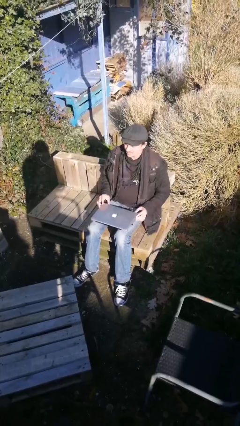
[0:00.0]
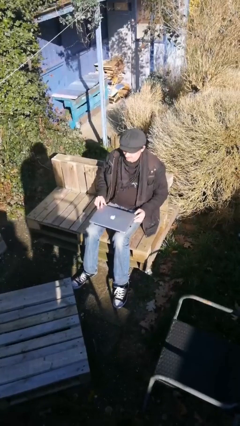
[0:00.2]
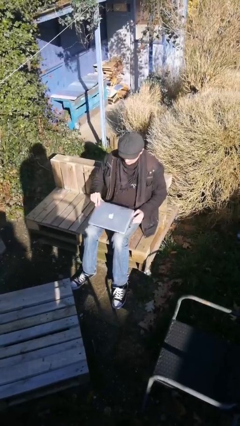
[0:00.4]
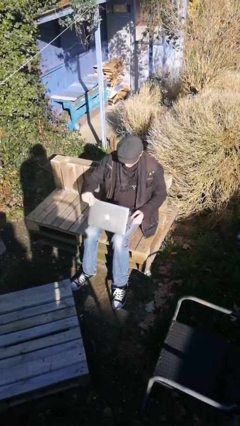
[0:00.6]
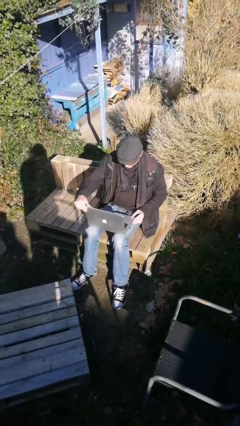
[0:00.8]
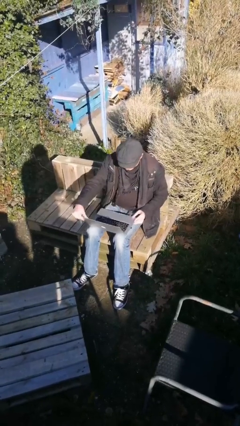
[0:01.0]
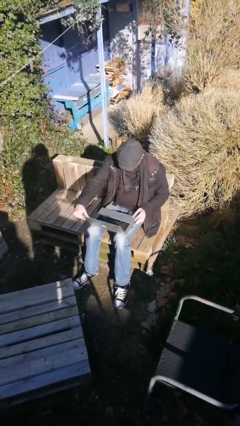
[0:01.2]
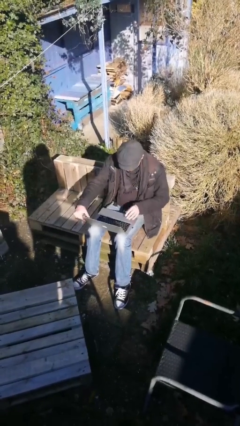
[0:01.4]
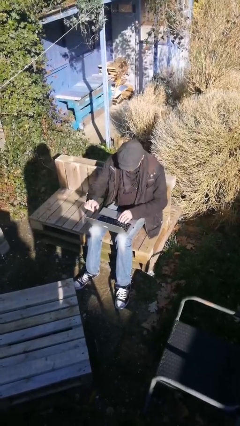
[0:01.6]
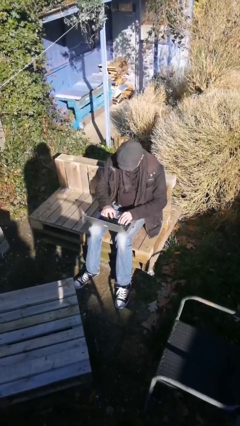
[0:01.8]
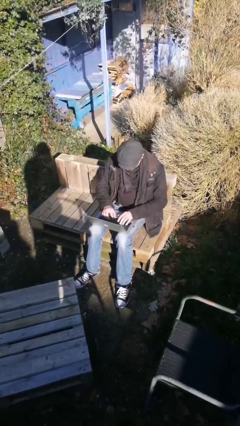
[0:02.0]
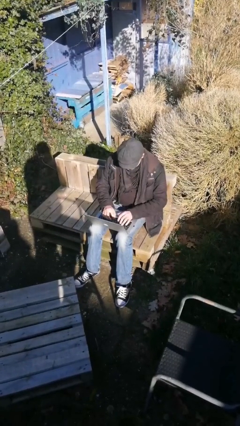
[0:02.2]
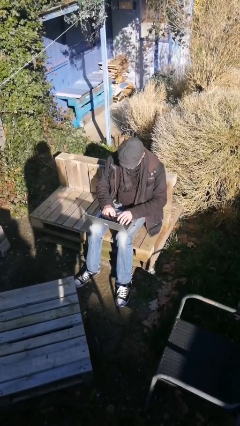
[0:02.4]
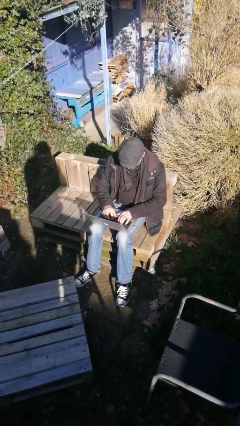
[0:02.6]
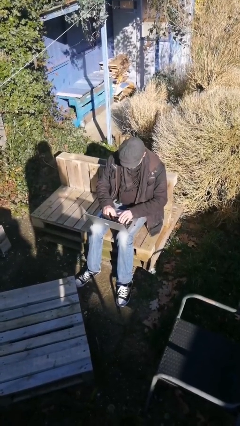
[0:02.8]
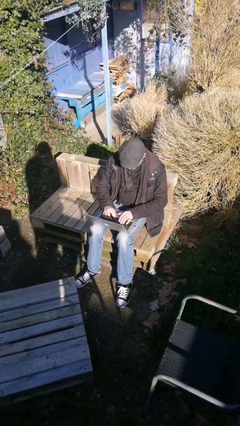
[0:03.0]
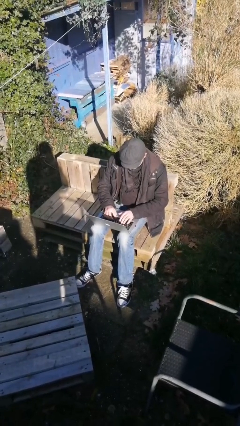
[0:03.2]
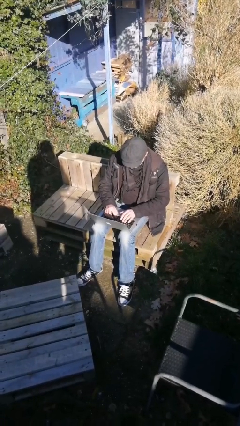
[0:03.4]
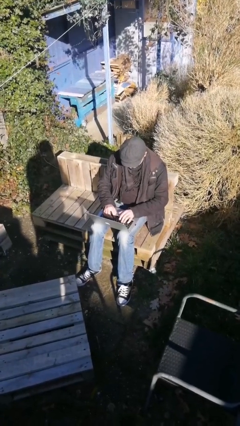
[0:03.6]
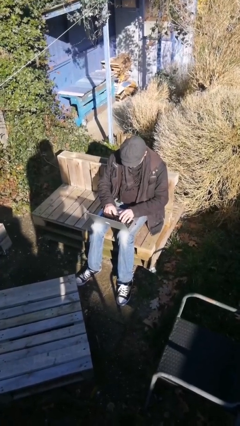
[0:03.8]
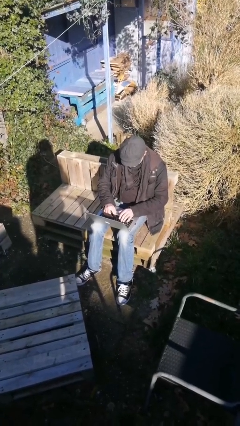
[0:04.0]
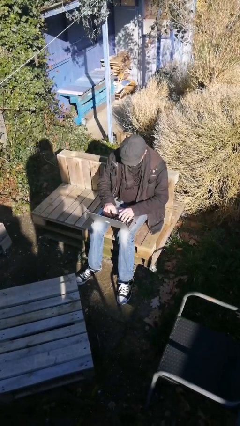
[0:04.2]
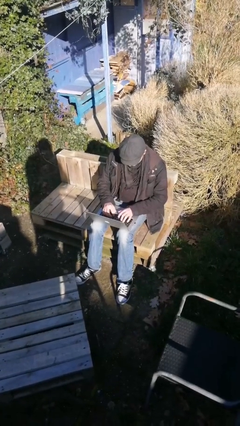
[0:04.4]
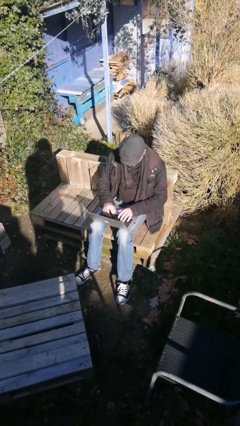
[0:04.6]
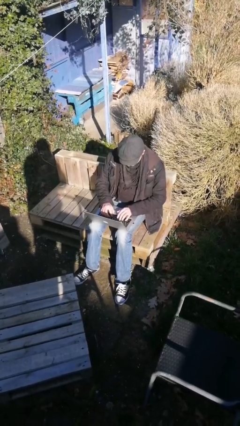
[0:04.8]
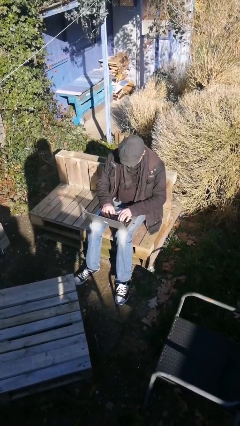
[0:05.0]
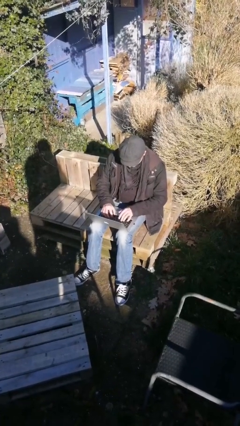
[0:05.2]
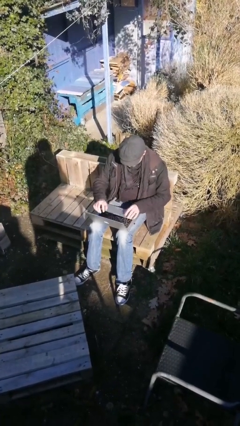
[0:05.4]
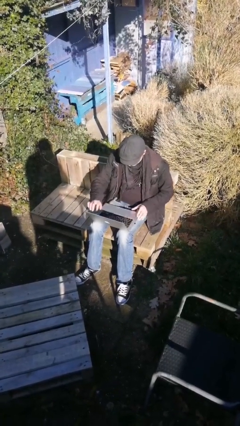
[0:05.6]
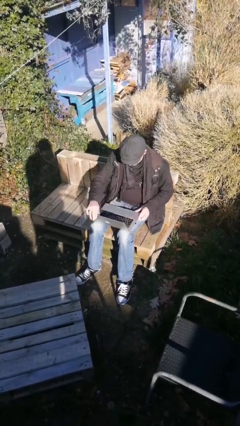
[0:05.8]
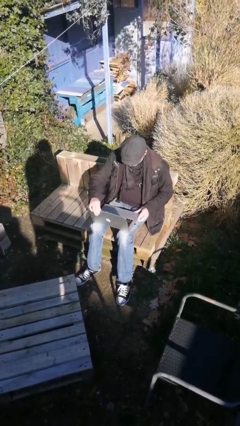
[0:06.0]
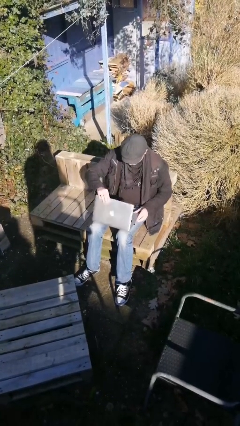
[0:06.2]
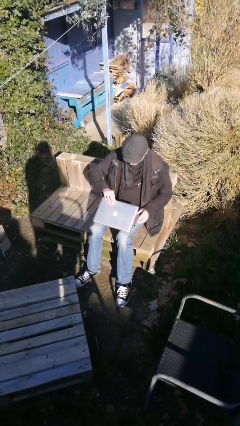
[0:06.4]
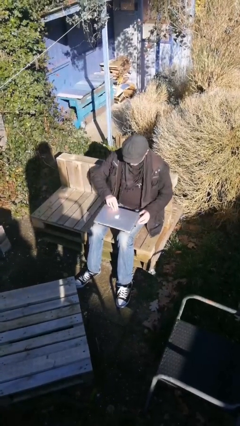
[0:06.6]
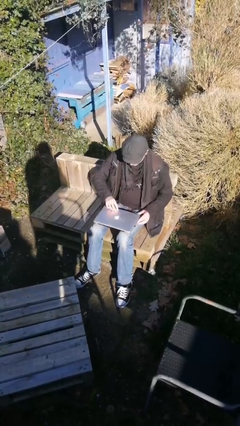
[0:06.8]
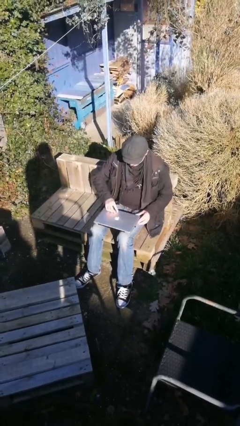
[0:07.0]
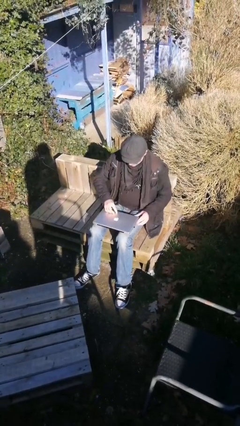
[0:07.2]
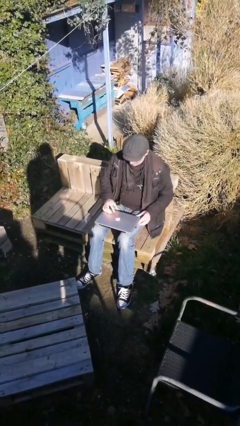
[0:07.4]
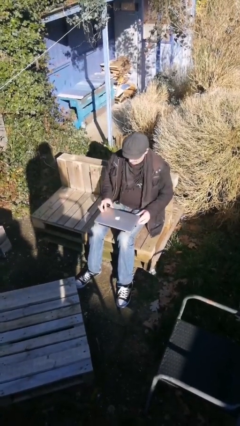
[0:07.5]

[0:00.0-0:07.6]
person interacts with laptop

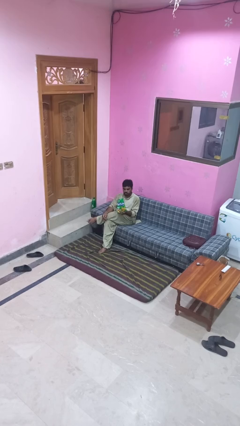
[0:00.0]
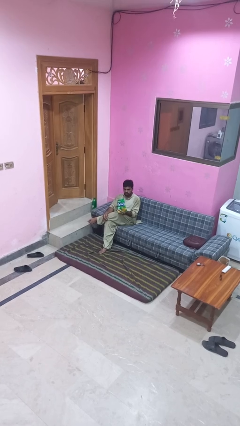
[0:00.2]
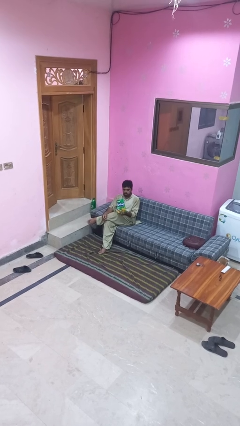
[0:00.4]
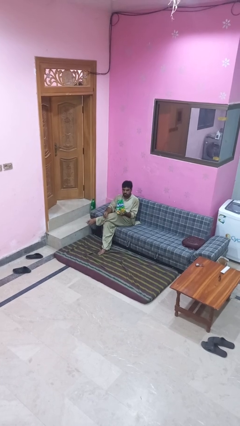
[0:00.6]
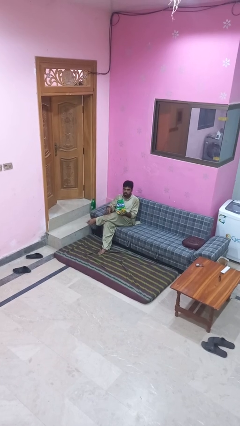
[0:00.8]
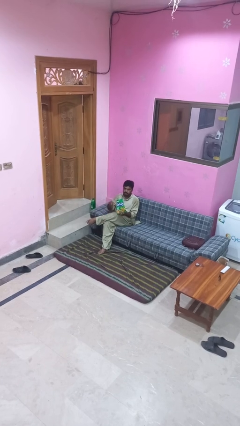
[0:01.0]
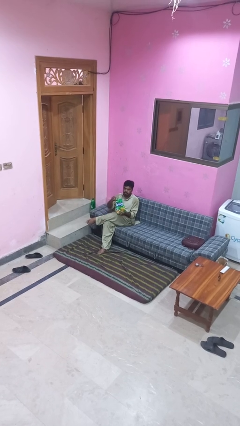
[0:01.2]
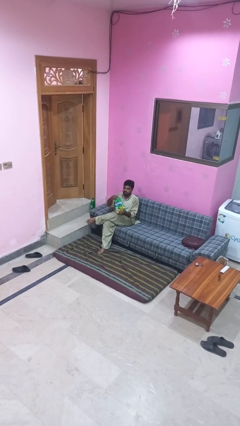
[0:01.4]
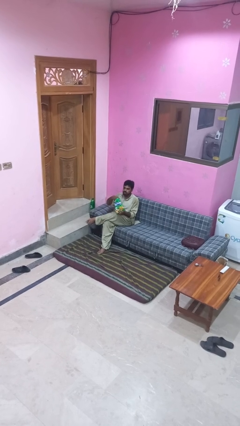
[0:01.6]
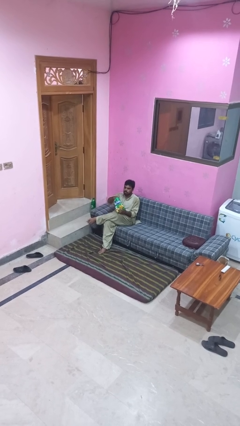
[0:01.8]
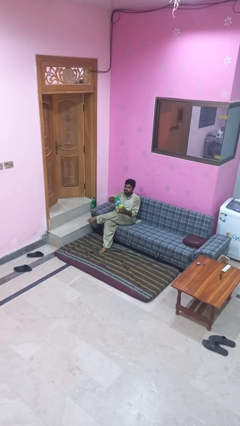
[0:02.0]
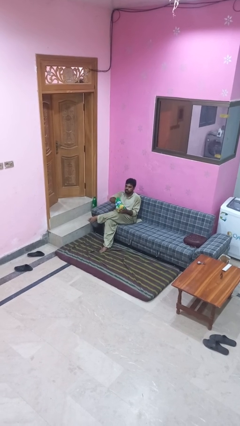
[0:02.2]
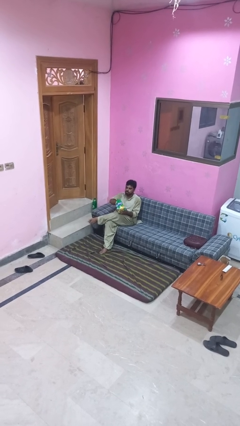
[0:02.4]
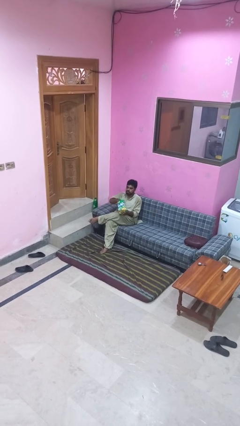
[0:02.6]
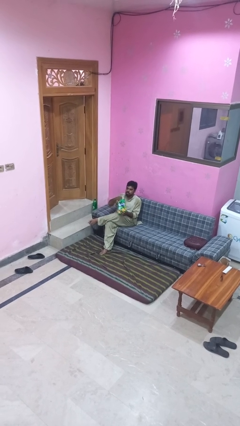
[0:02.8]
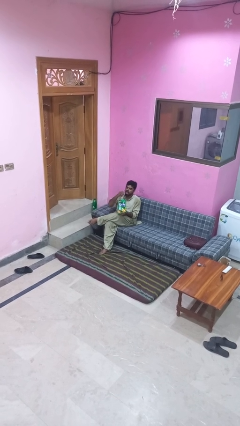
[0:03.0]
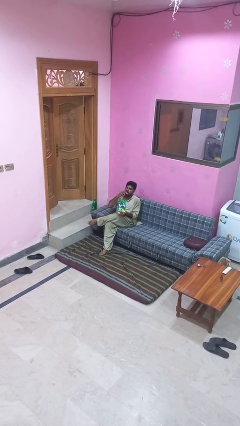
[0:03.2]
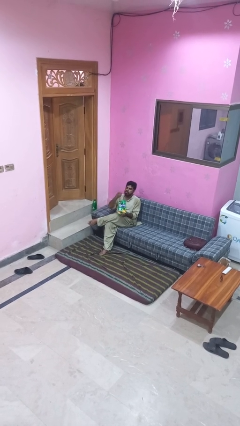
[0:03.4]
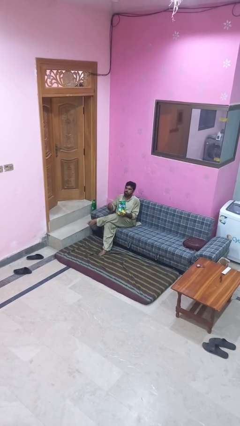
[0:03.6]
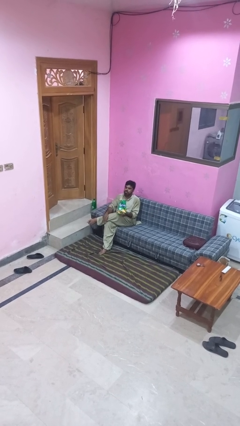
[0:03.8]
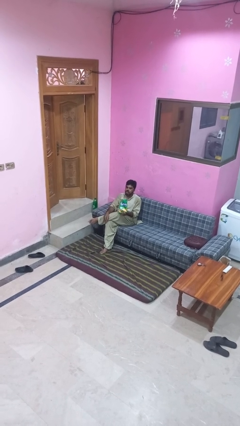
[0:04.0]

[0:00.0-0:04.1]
person eats snack from bag

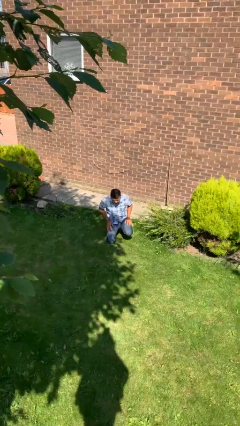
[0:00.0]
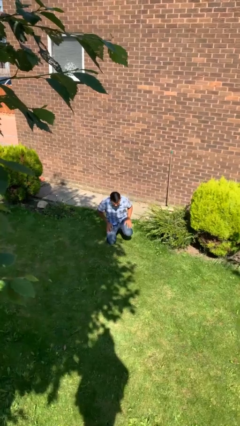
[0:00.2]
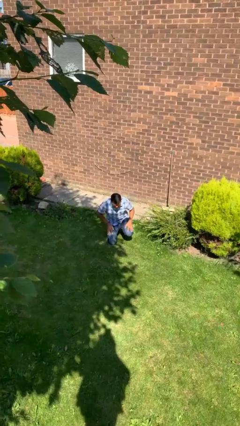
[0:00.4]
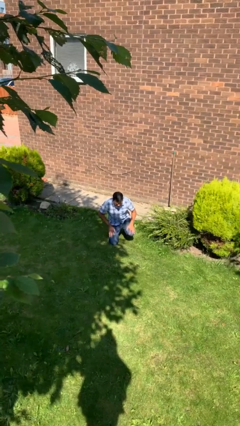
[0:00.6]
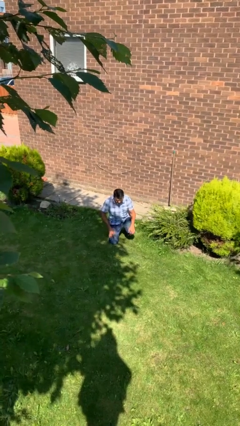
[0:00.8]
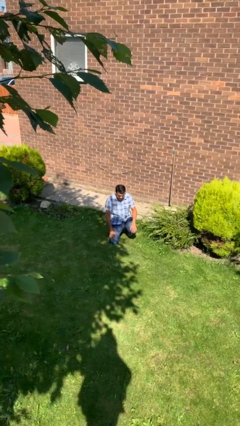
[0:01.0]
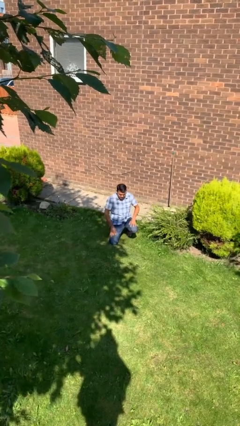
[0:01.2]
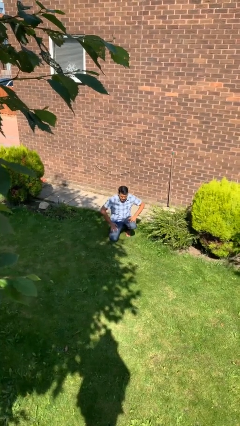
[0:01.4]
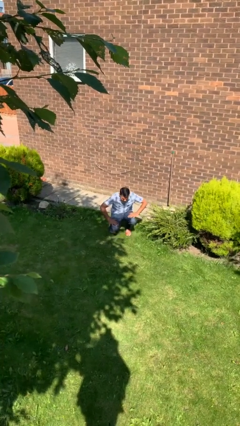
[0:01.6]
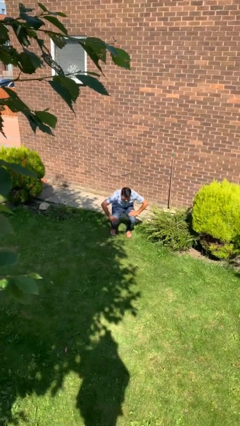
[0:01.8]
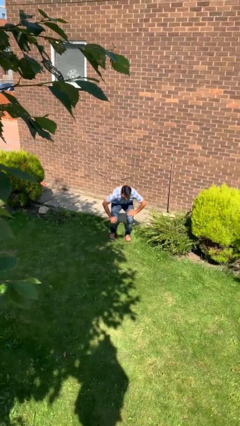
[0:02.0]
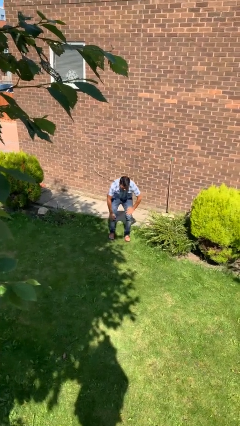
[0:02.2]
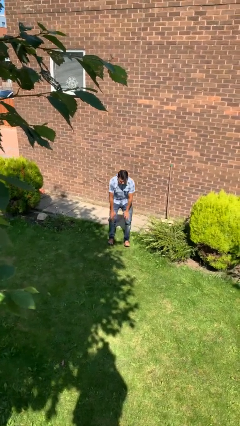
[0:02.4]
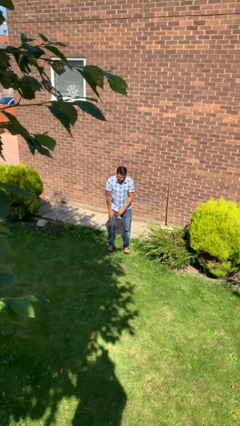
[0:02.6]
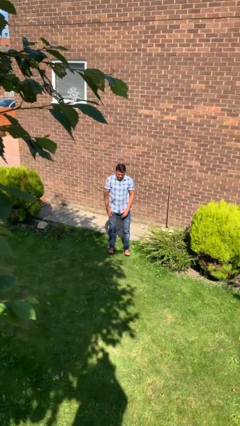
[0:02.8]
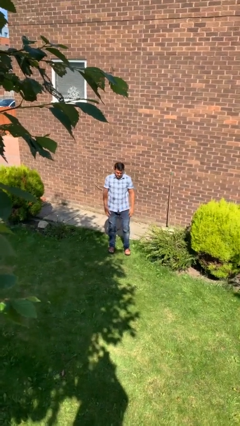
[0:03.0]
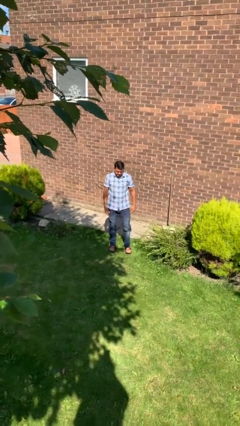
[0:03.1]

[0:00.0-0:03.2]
person stands up from floor

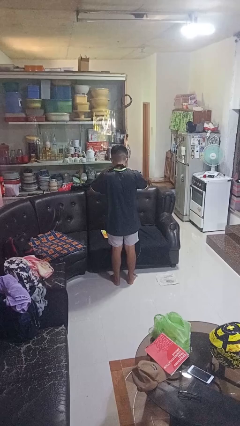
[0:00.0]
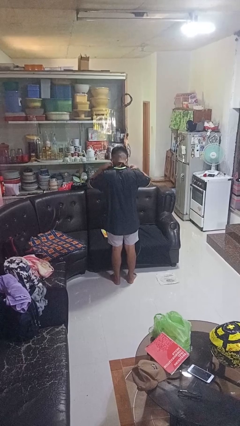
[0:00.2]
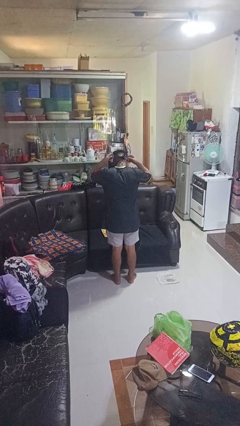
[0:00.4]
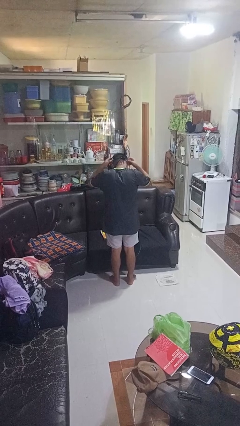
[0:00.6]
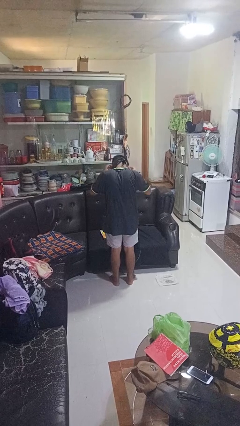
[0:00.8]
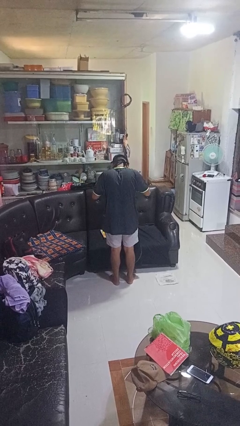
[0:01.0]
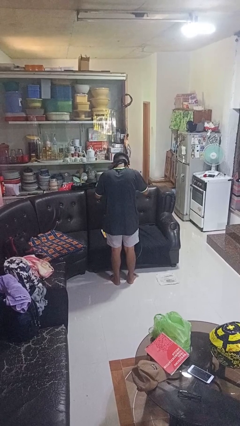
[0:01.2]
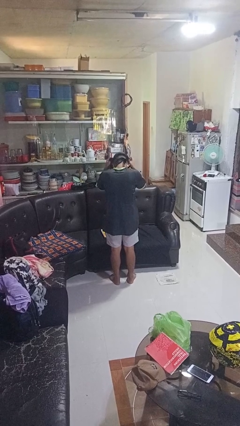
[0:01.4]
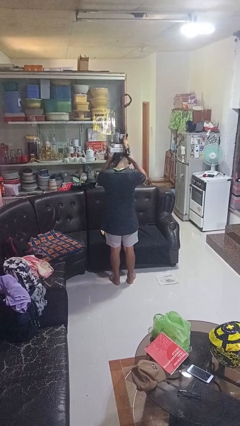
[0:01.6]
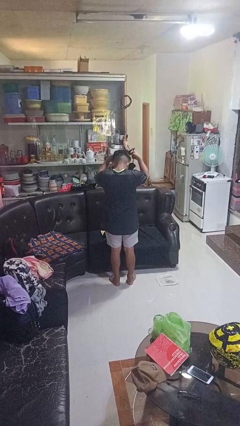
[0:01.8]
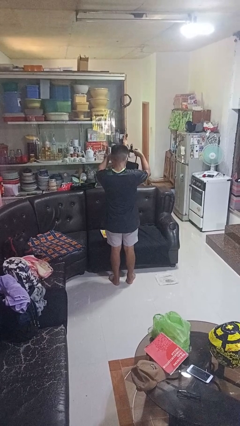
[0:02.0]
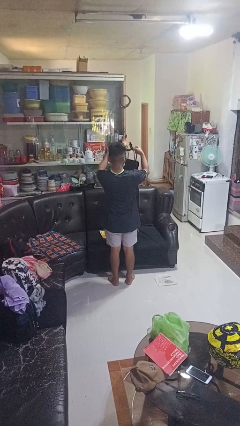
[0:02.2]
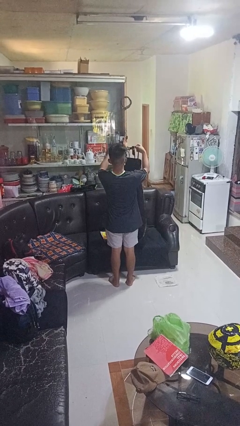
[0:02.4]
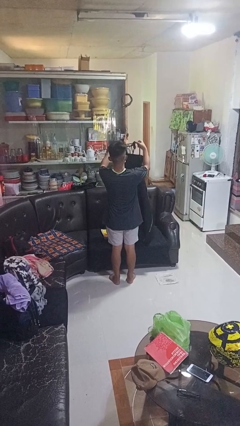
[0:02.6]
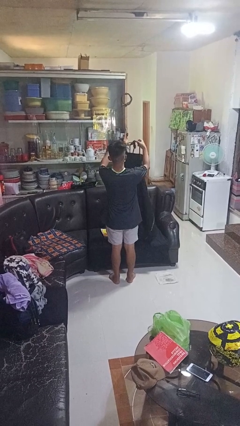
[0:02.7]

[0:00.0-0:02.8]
person takes off apron
